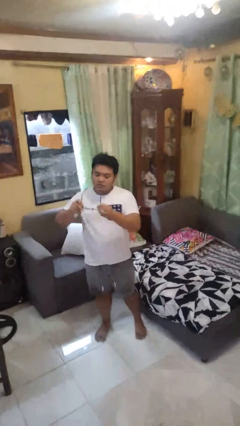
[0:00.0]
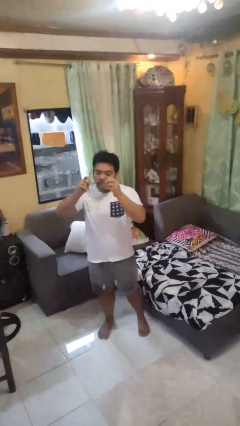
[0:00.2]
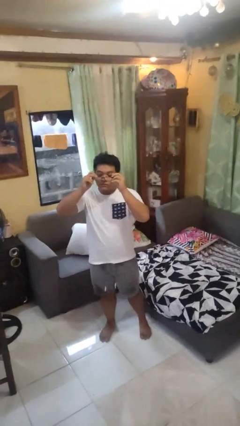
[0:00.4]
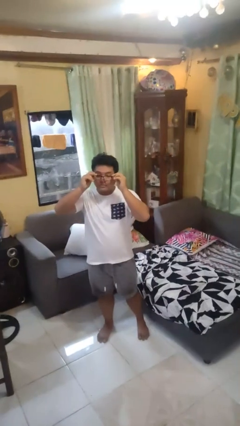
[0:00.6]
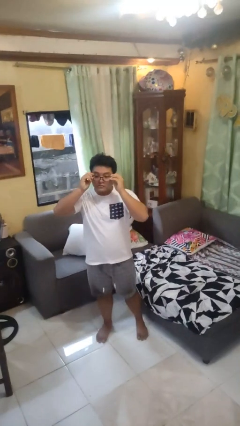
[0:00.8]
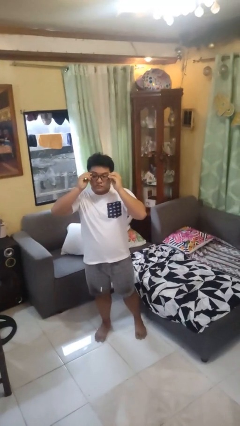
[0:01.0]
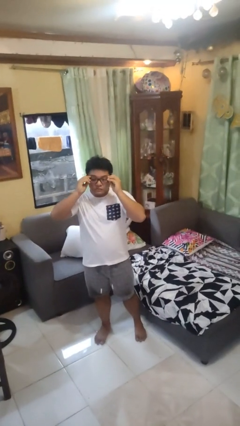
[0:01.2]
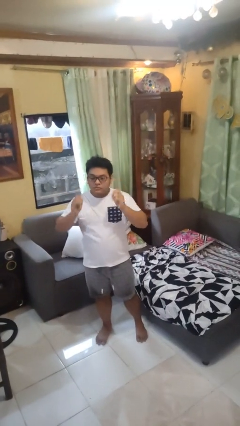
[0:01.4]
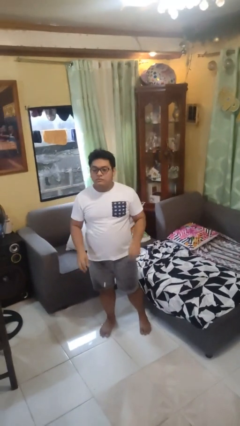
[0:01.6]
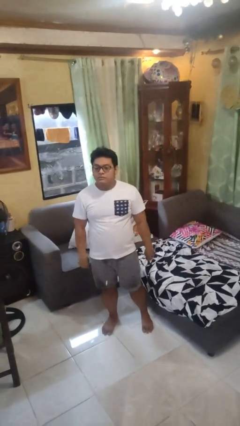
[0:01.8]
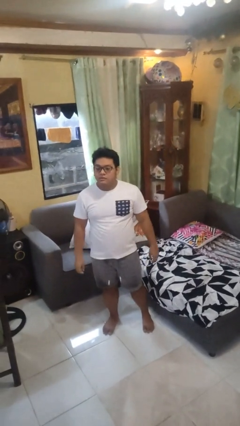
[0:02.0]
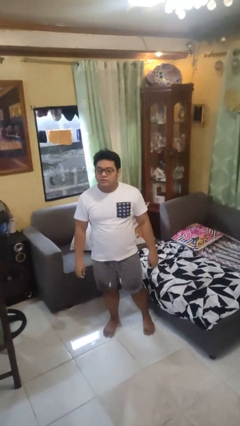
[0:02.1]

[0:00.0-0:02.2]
person puts on glasses

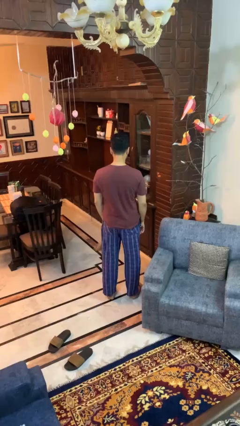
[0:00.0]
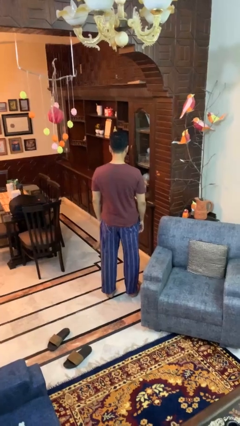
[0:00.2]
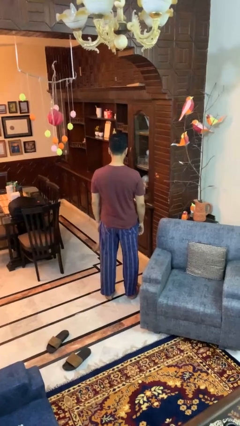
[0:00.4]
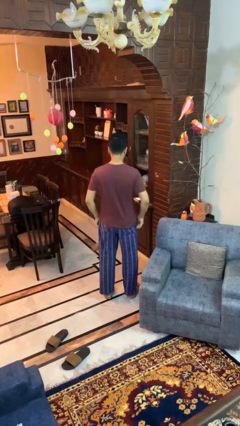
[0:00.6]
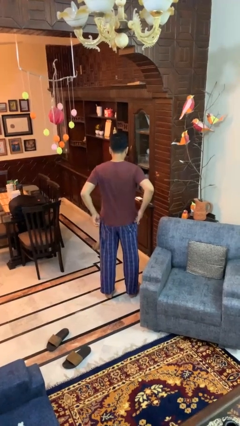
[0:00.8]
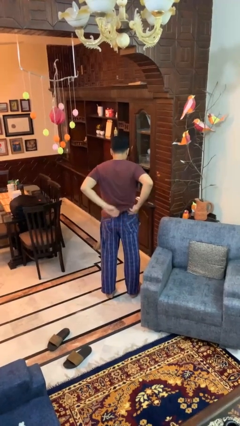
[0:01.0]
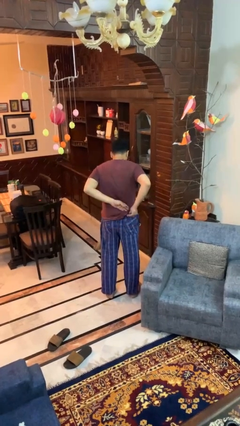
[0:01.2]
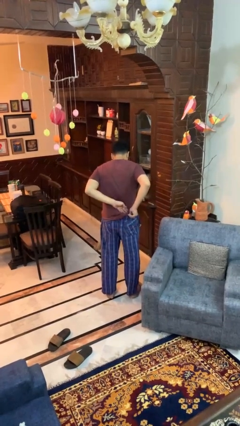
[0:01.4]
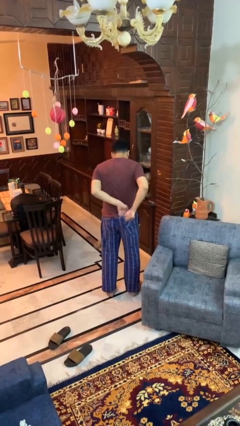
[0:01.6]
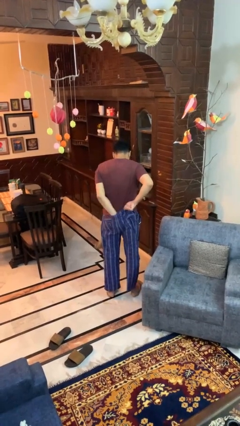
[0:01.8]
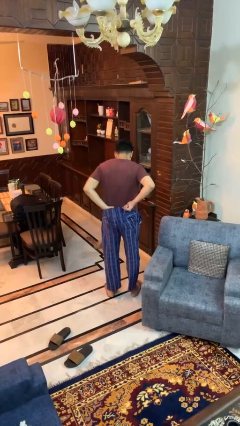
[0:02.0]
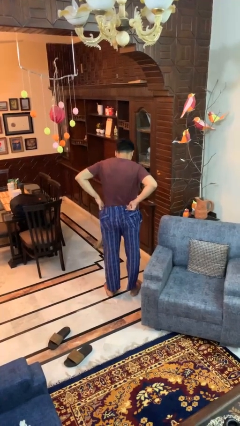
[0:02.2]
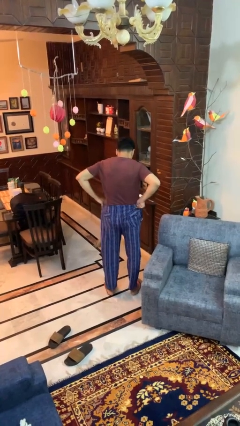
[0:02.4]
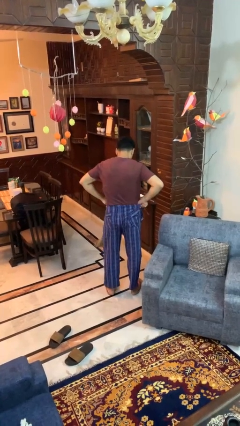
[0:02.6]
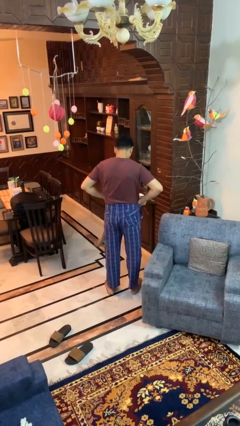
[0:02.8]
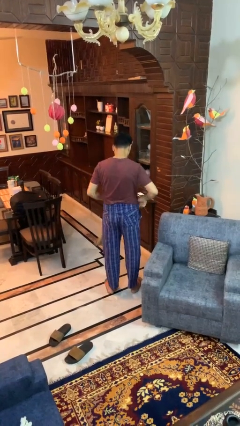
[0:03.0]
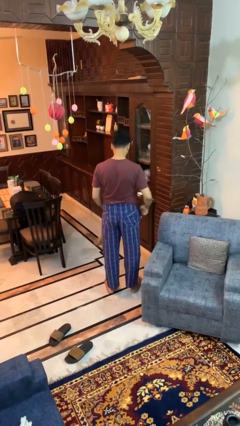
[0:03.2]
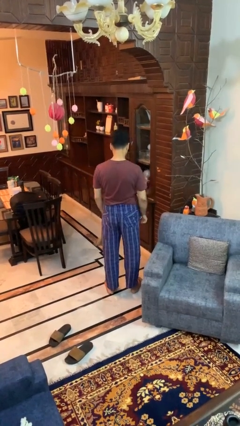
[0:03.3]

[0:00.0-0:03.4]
person tucks in shirt

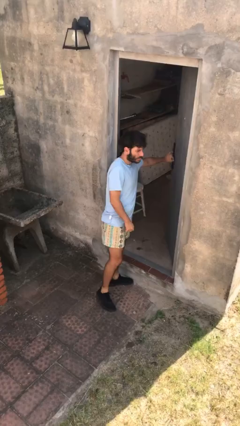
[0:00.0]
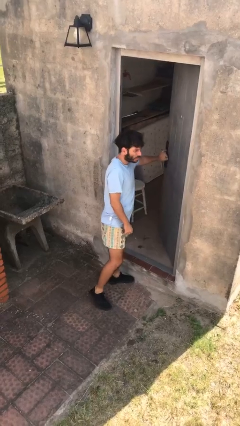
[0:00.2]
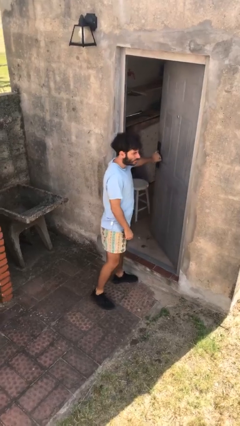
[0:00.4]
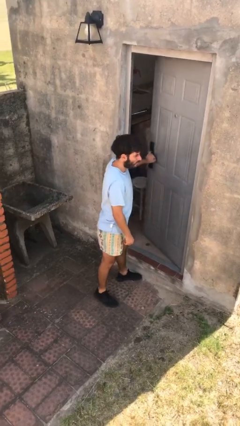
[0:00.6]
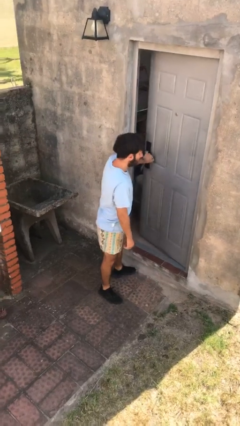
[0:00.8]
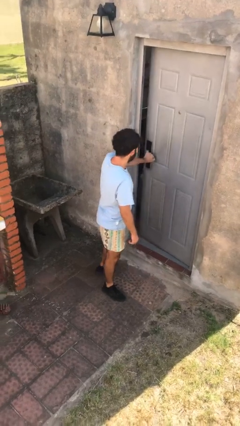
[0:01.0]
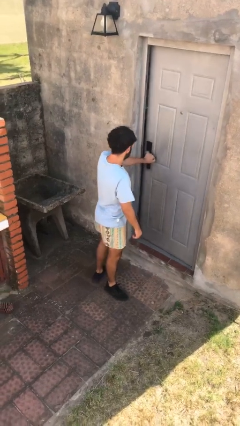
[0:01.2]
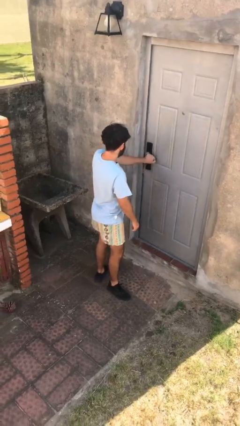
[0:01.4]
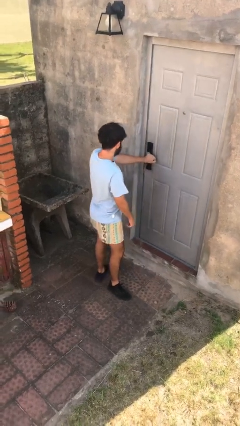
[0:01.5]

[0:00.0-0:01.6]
person closes facility door

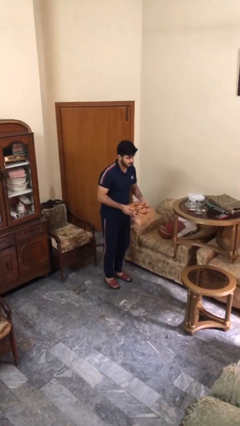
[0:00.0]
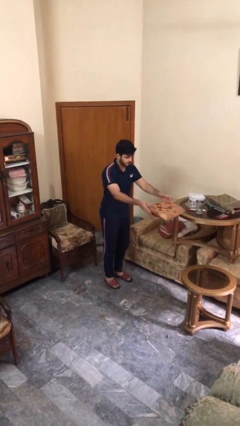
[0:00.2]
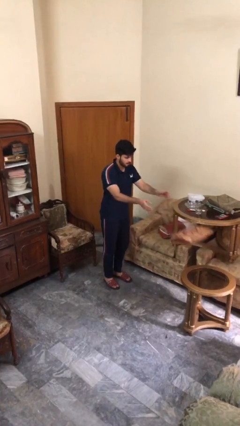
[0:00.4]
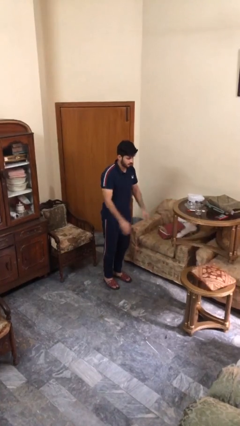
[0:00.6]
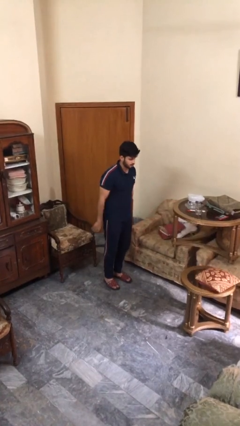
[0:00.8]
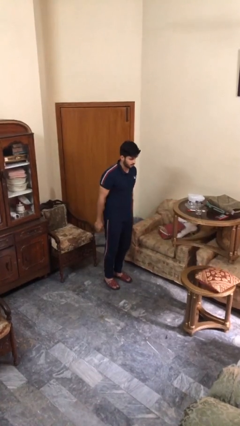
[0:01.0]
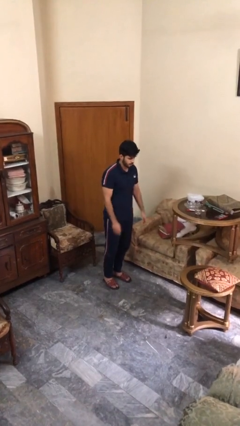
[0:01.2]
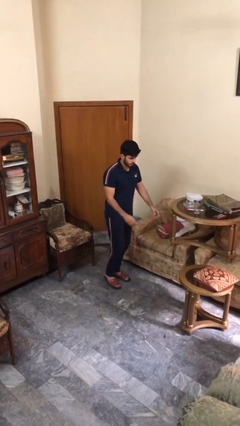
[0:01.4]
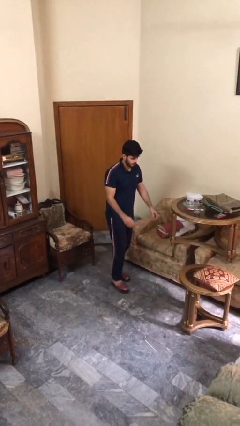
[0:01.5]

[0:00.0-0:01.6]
person throws object on table

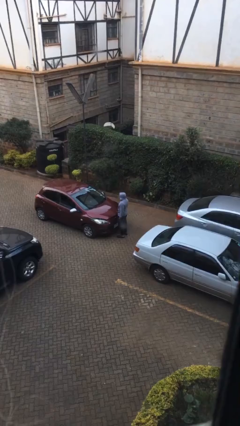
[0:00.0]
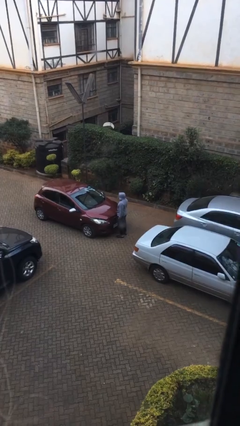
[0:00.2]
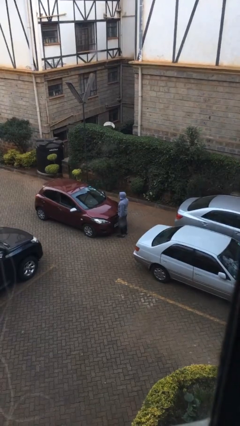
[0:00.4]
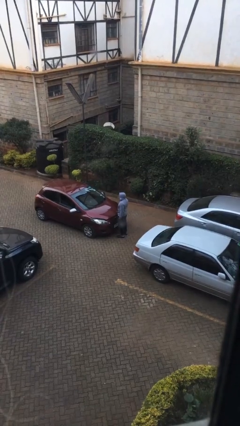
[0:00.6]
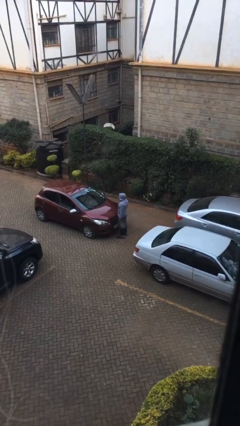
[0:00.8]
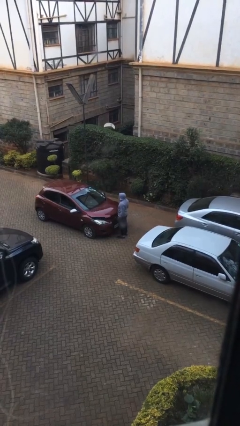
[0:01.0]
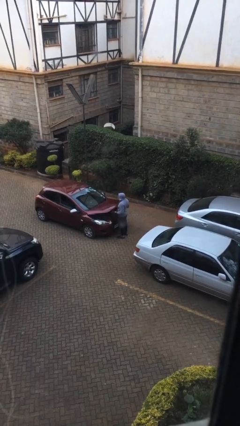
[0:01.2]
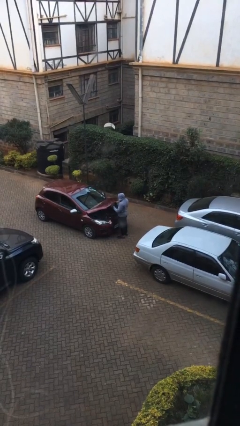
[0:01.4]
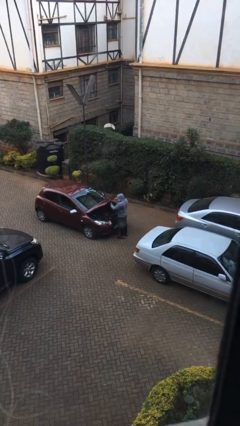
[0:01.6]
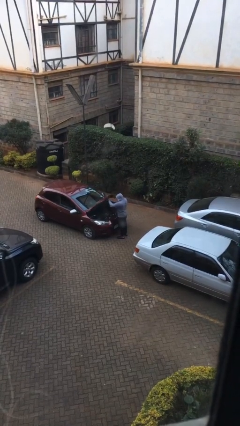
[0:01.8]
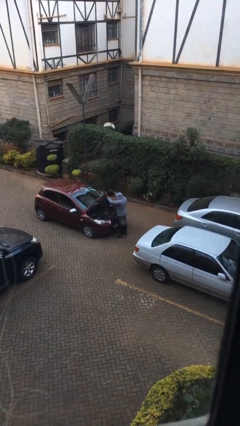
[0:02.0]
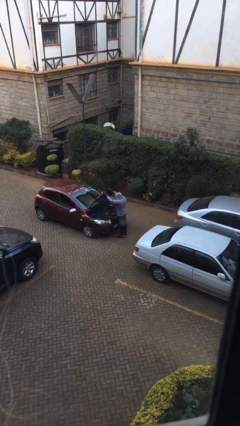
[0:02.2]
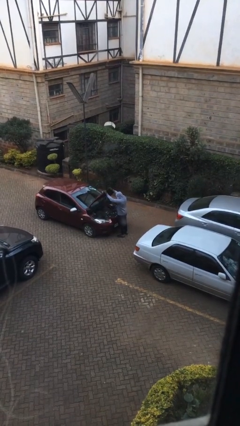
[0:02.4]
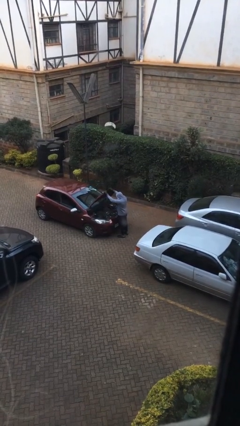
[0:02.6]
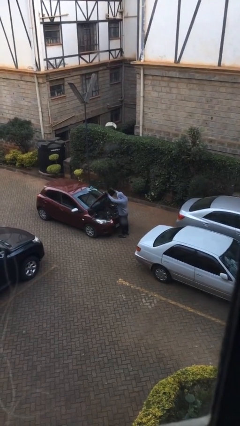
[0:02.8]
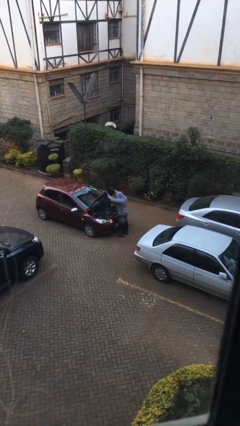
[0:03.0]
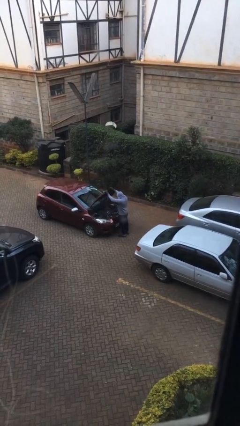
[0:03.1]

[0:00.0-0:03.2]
person opens car hood

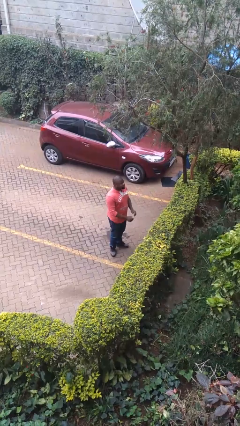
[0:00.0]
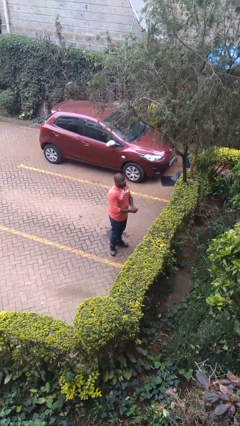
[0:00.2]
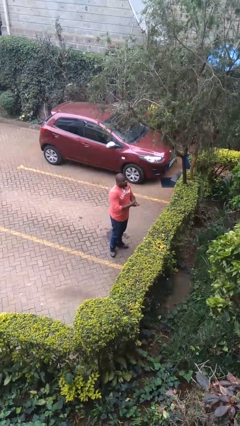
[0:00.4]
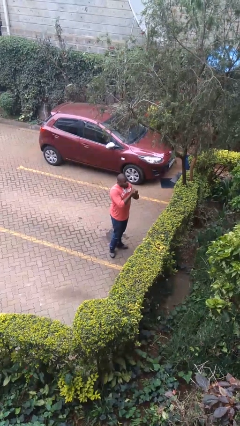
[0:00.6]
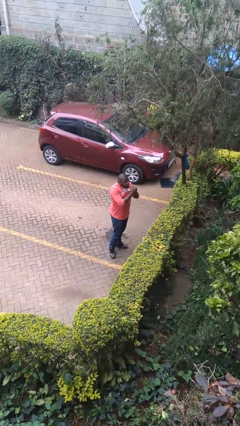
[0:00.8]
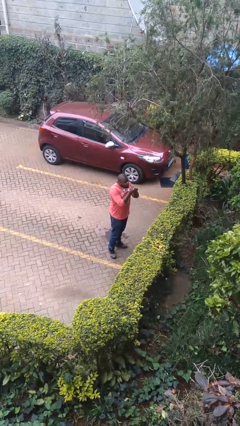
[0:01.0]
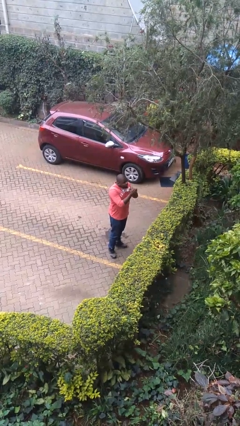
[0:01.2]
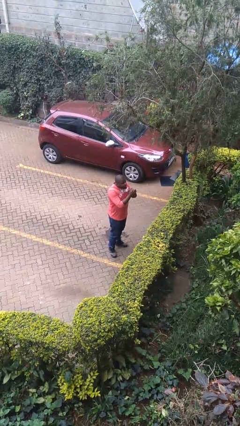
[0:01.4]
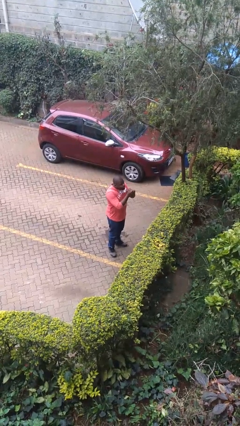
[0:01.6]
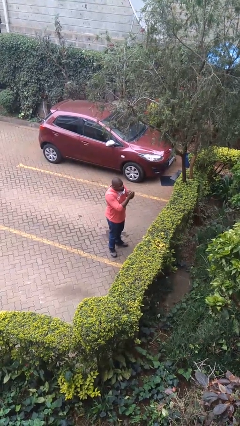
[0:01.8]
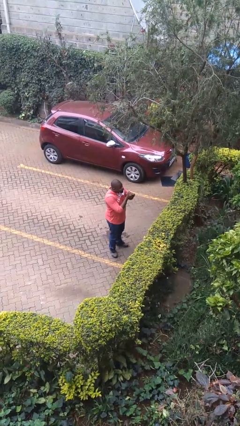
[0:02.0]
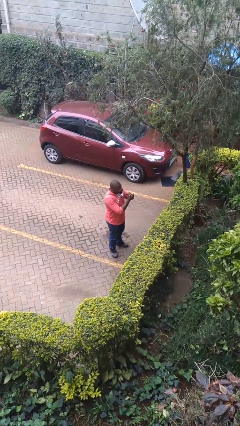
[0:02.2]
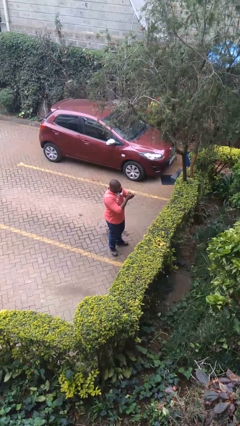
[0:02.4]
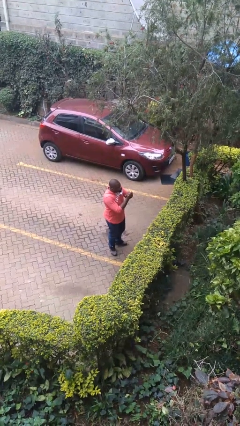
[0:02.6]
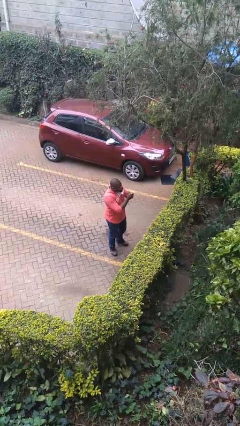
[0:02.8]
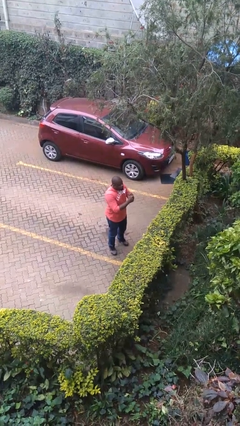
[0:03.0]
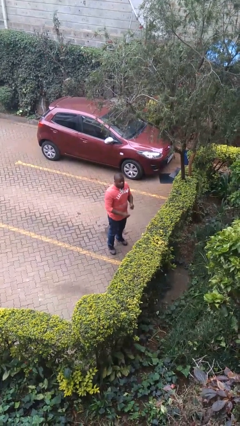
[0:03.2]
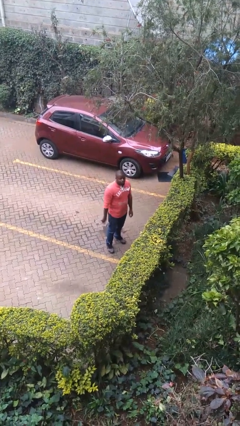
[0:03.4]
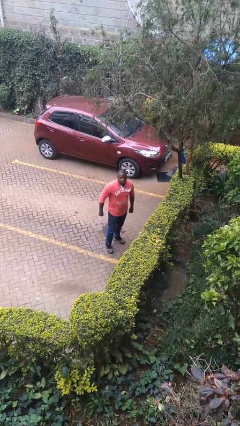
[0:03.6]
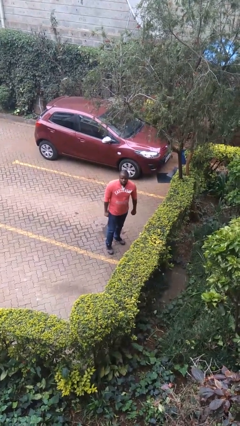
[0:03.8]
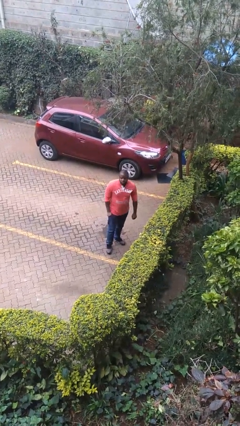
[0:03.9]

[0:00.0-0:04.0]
person blows into hands

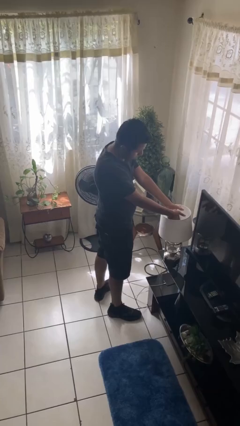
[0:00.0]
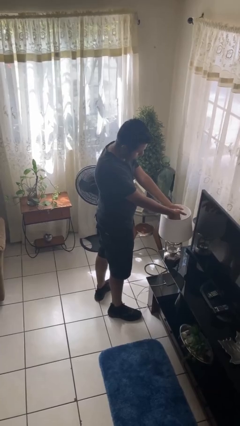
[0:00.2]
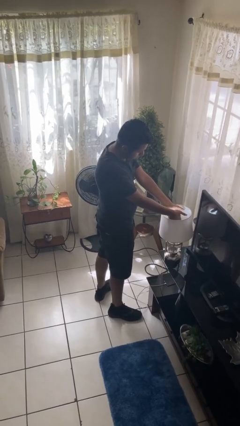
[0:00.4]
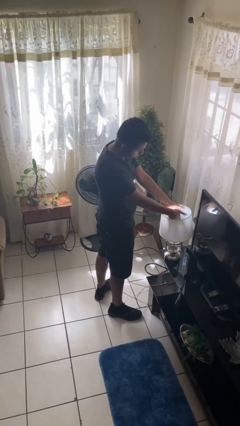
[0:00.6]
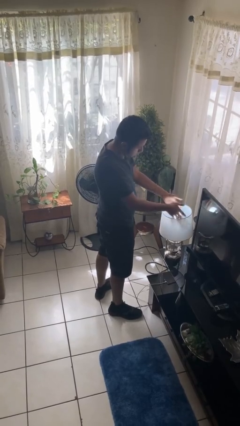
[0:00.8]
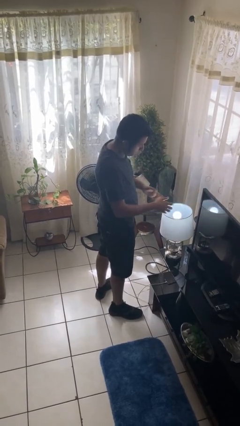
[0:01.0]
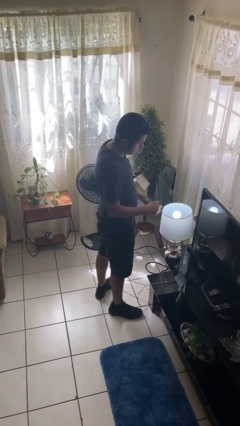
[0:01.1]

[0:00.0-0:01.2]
person turns on lamp
